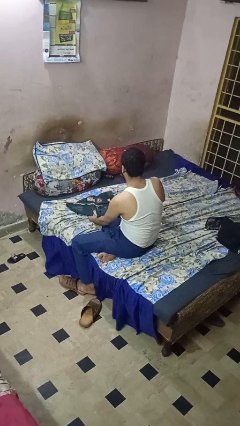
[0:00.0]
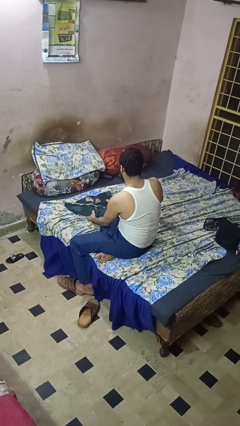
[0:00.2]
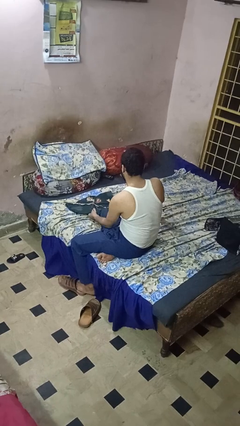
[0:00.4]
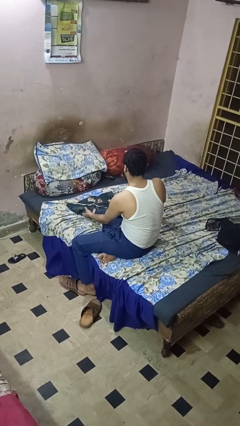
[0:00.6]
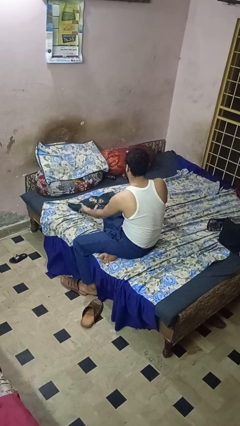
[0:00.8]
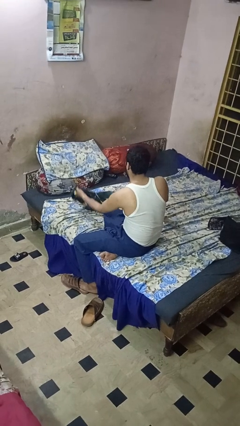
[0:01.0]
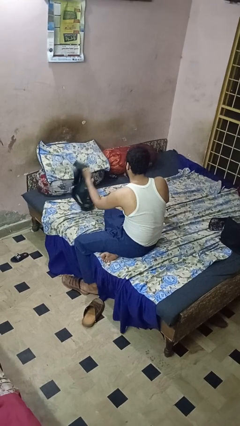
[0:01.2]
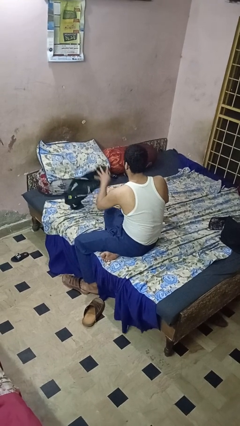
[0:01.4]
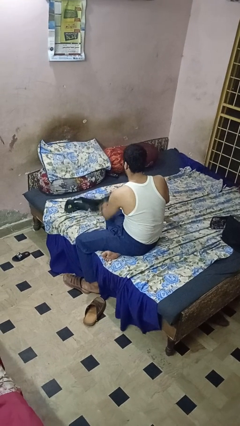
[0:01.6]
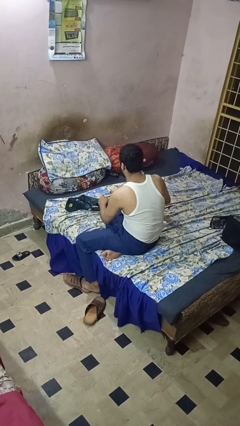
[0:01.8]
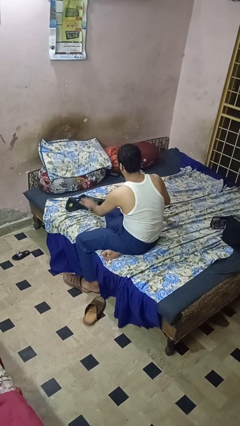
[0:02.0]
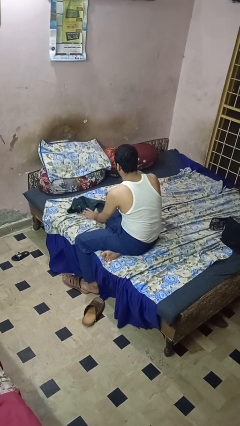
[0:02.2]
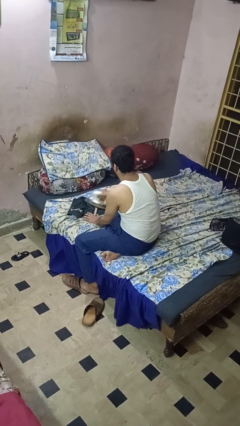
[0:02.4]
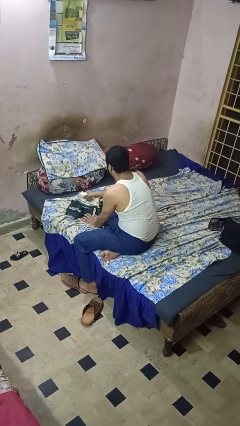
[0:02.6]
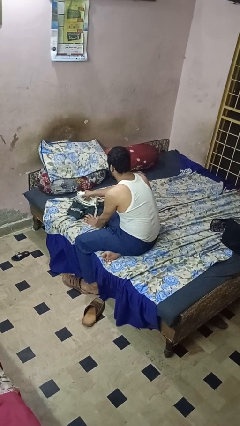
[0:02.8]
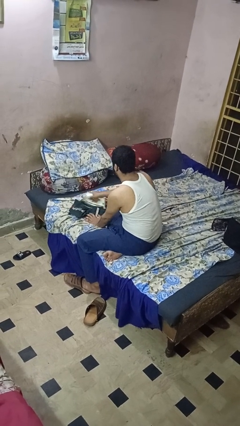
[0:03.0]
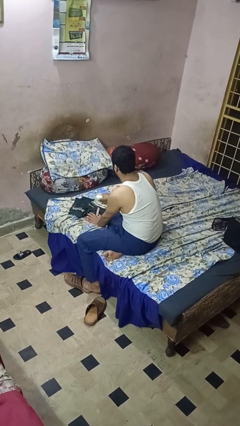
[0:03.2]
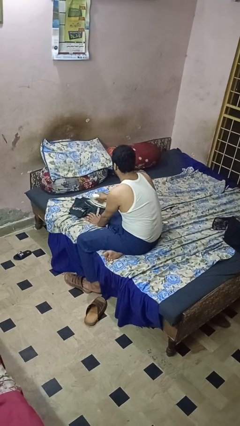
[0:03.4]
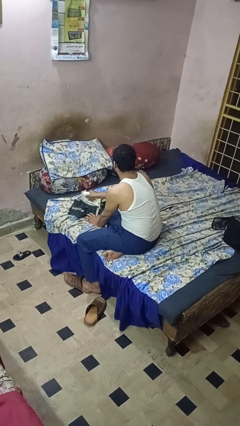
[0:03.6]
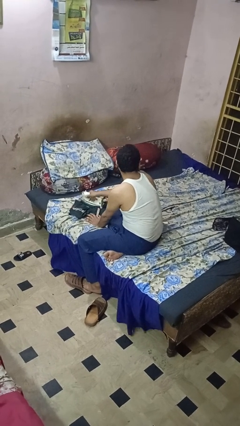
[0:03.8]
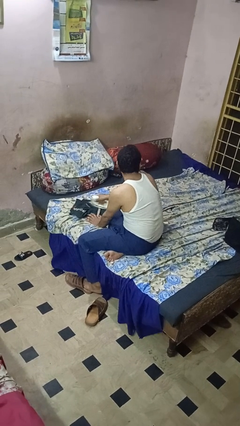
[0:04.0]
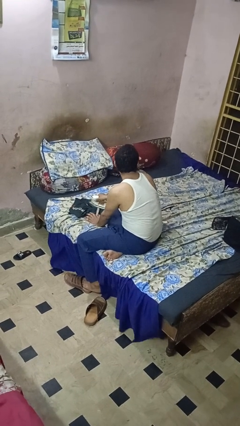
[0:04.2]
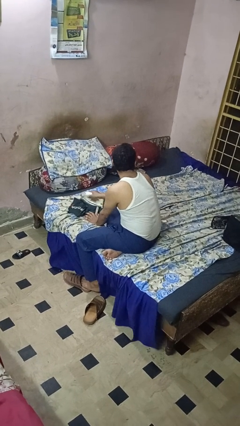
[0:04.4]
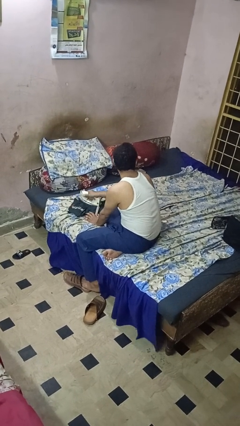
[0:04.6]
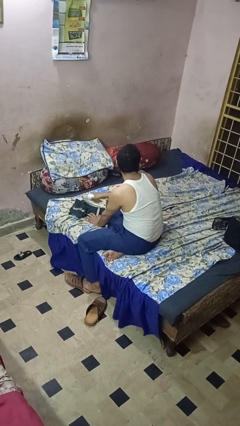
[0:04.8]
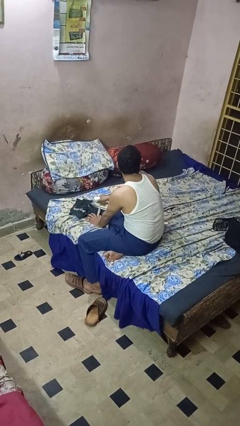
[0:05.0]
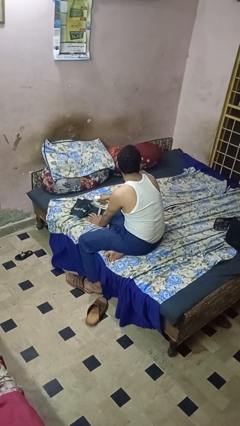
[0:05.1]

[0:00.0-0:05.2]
person irons clothes

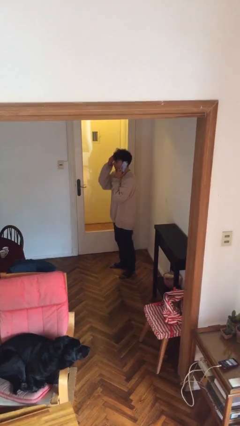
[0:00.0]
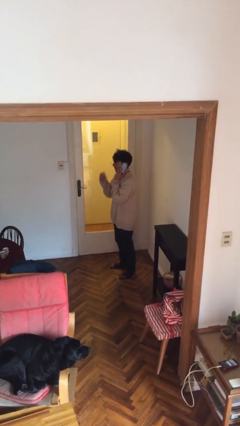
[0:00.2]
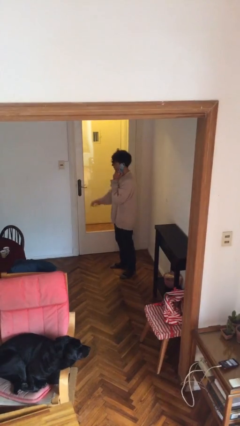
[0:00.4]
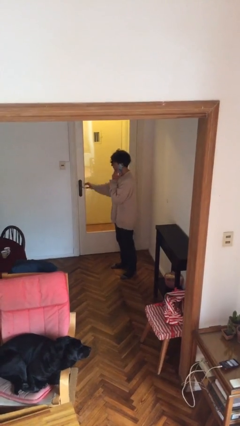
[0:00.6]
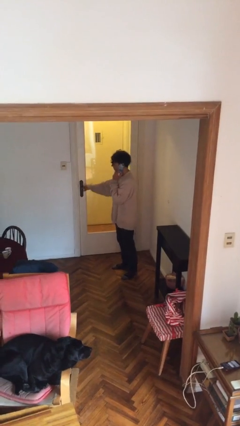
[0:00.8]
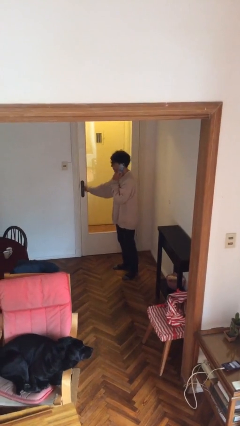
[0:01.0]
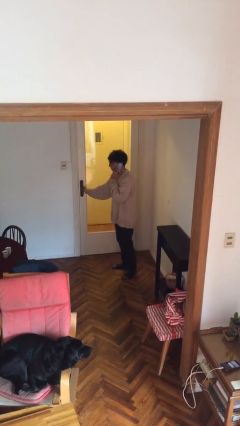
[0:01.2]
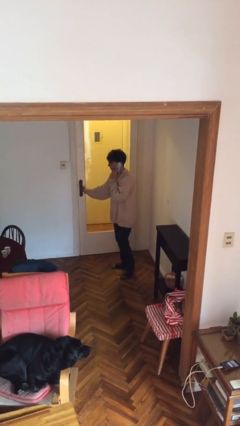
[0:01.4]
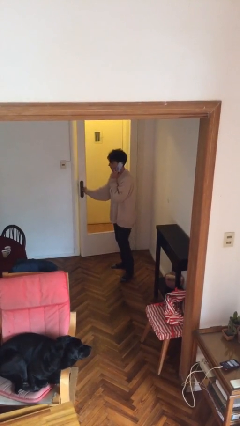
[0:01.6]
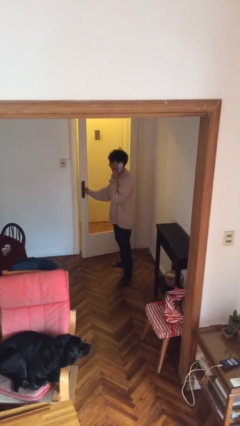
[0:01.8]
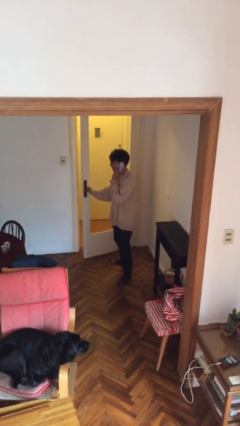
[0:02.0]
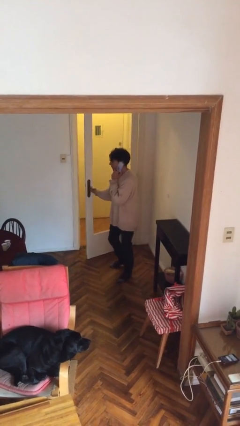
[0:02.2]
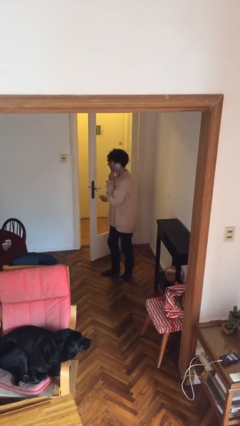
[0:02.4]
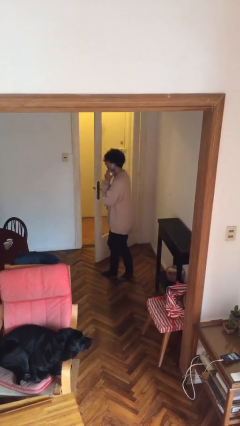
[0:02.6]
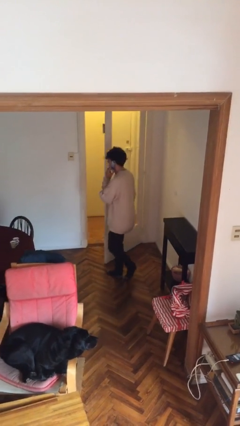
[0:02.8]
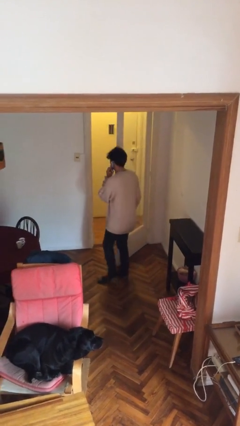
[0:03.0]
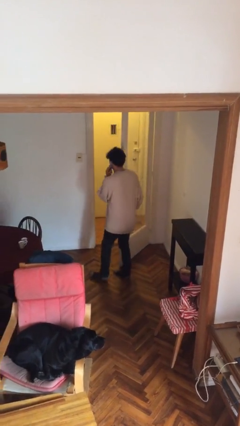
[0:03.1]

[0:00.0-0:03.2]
person opens facility door

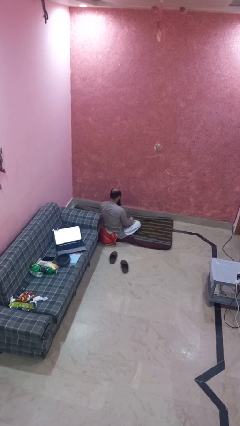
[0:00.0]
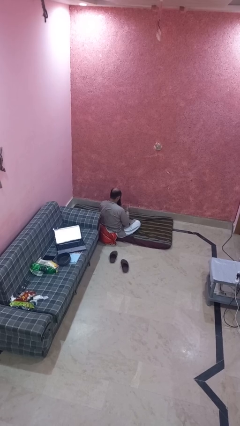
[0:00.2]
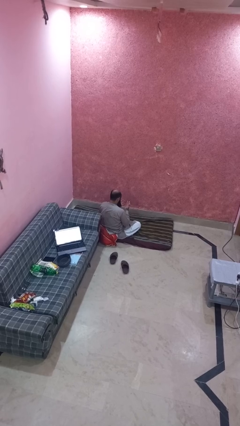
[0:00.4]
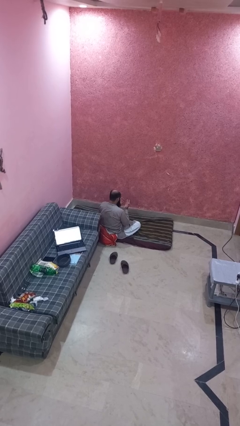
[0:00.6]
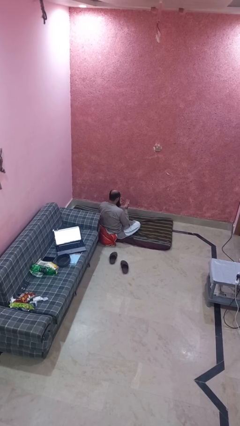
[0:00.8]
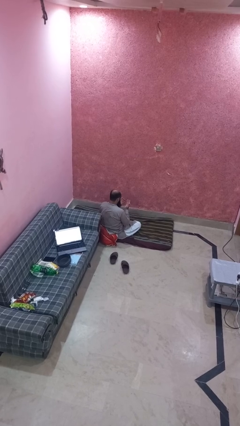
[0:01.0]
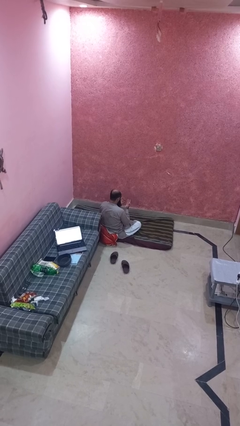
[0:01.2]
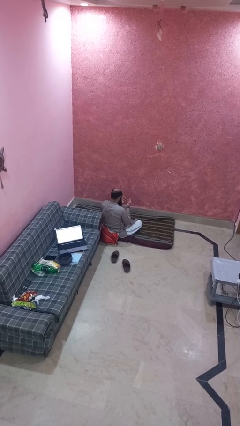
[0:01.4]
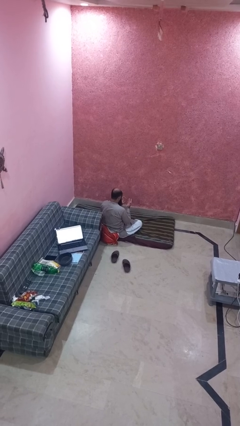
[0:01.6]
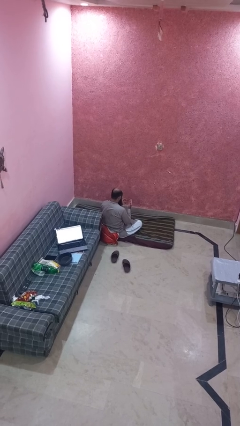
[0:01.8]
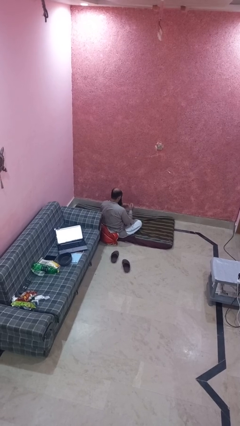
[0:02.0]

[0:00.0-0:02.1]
person looks at hands in lap

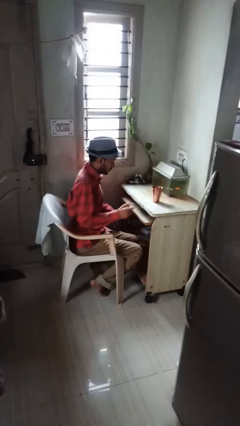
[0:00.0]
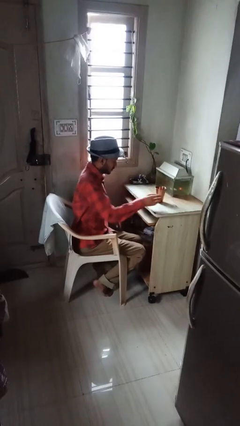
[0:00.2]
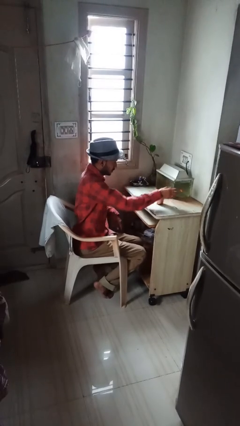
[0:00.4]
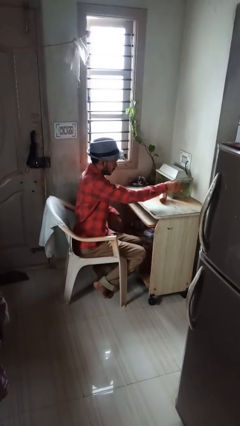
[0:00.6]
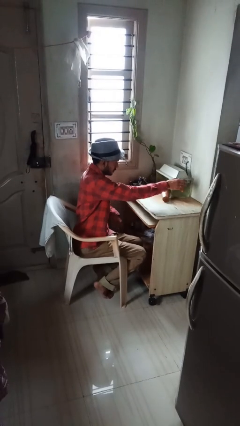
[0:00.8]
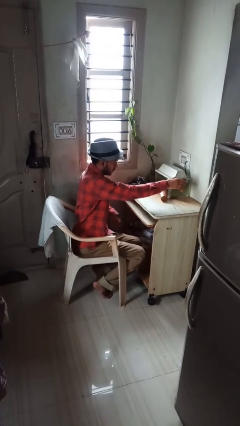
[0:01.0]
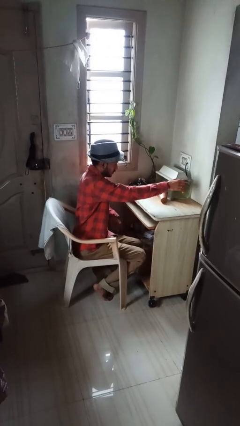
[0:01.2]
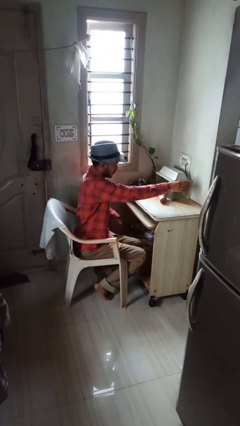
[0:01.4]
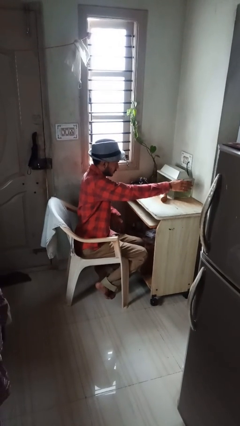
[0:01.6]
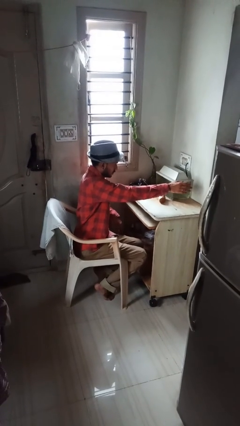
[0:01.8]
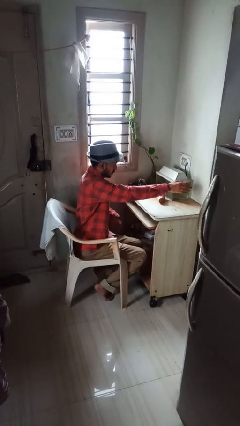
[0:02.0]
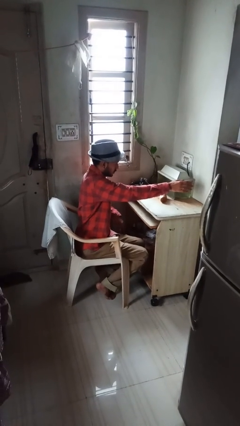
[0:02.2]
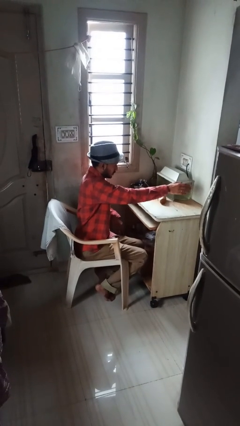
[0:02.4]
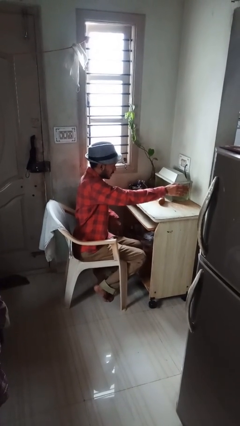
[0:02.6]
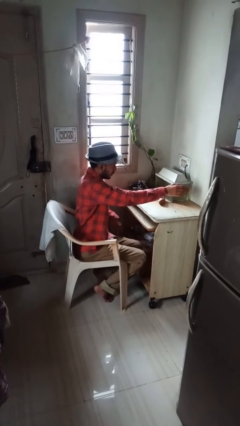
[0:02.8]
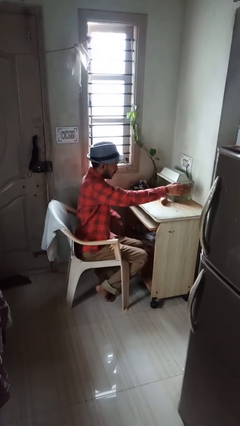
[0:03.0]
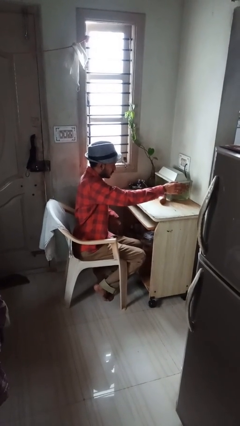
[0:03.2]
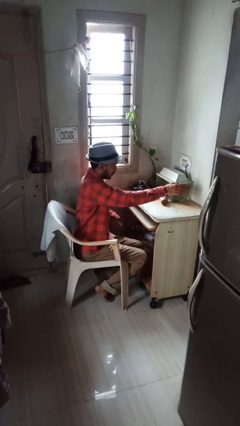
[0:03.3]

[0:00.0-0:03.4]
person knocks over glass

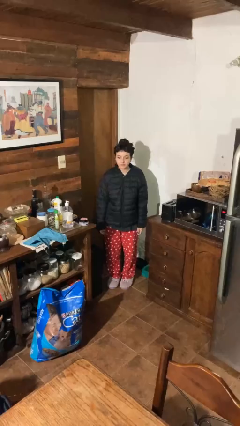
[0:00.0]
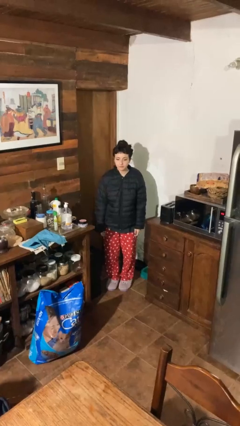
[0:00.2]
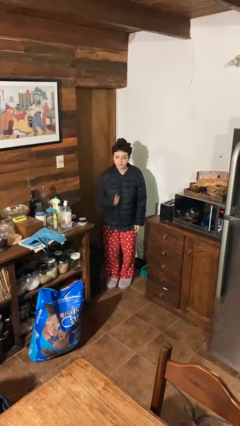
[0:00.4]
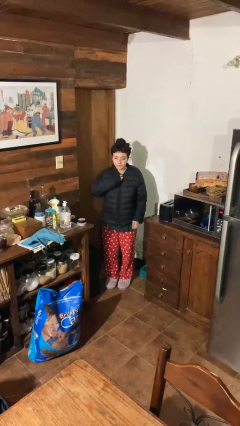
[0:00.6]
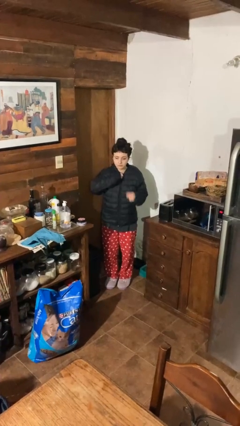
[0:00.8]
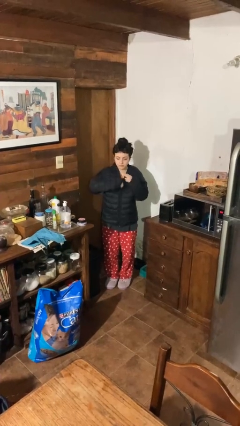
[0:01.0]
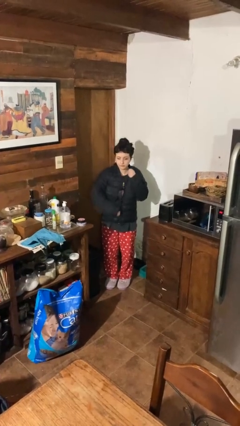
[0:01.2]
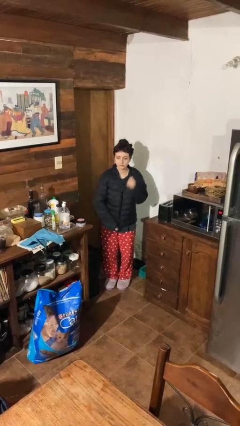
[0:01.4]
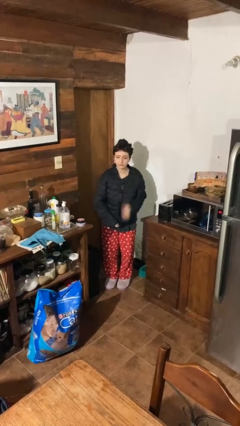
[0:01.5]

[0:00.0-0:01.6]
person unzips jacket

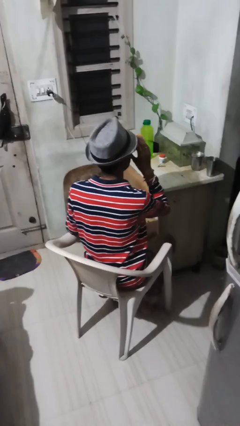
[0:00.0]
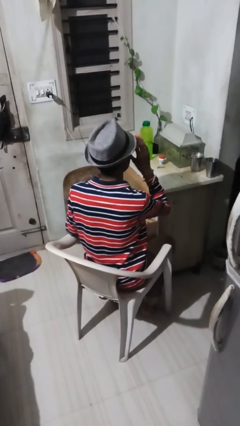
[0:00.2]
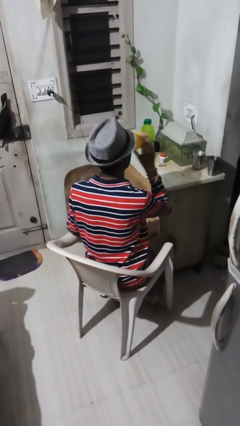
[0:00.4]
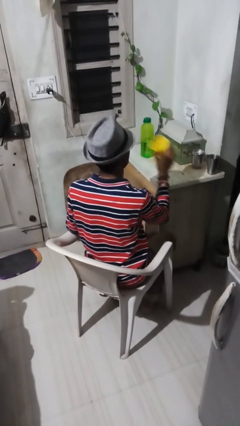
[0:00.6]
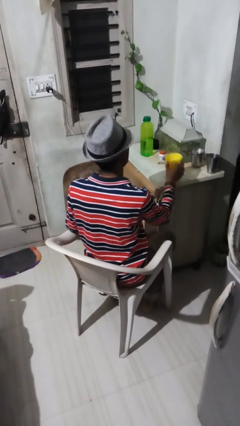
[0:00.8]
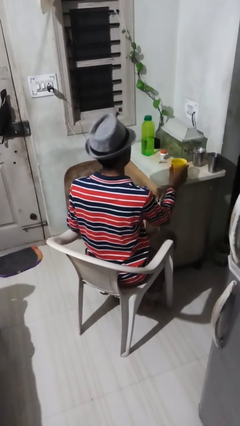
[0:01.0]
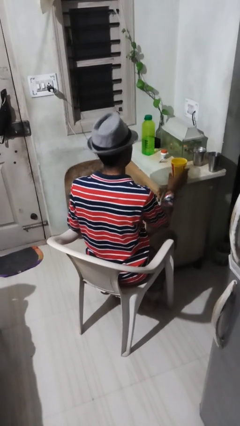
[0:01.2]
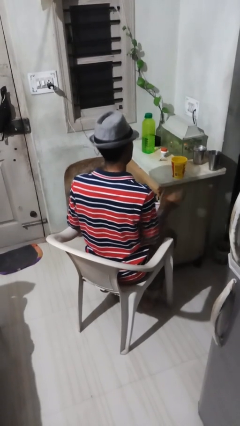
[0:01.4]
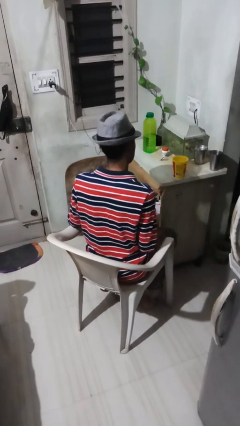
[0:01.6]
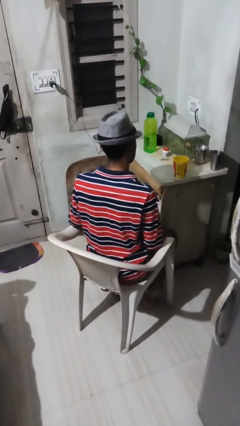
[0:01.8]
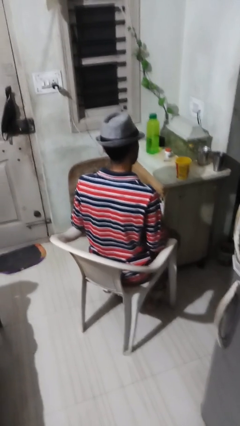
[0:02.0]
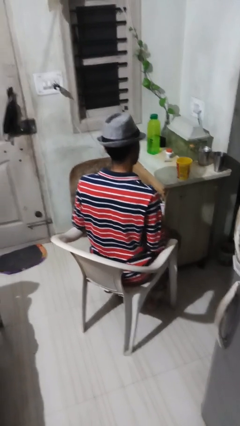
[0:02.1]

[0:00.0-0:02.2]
person puts down object on table
